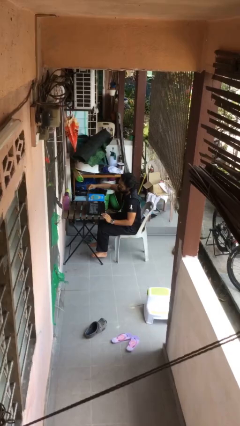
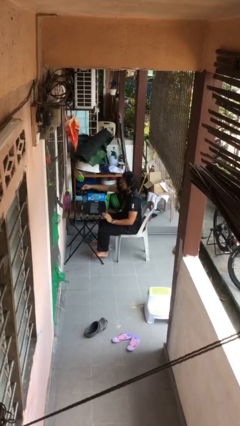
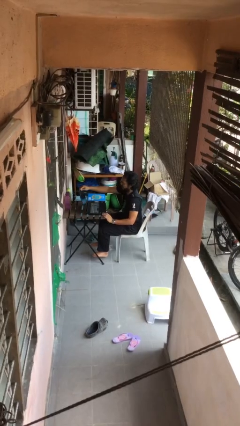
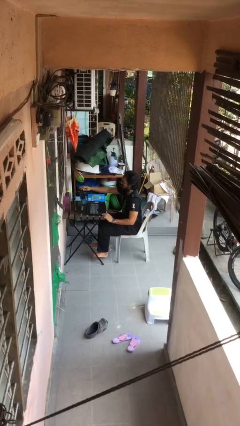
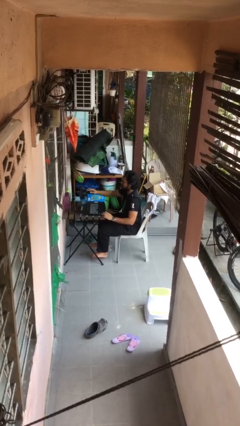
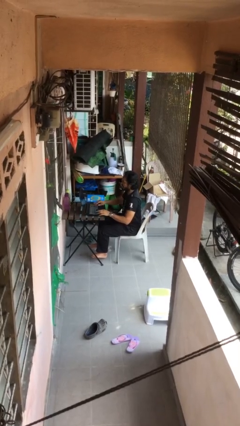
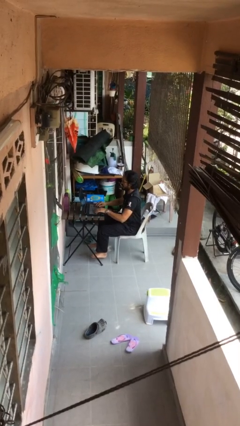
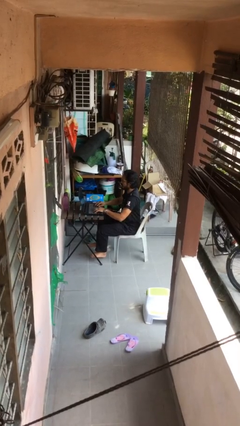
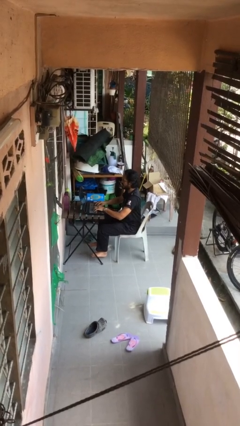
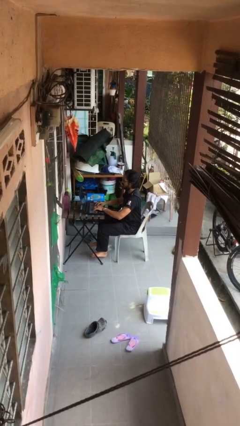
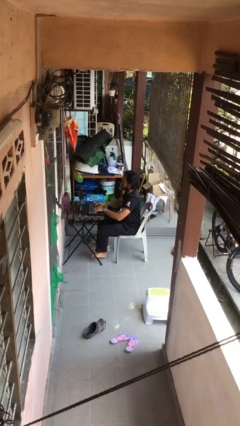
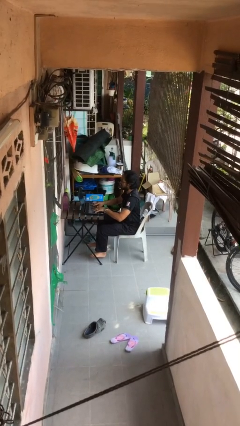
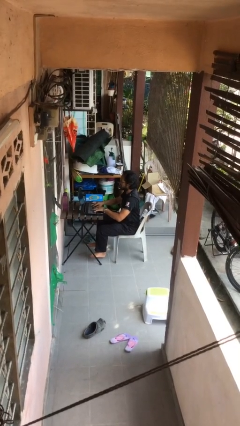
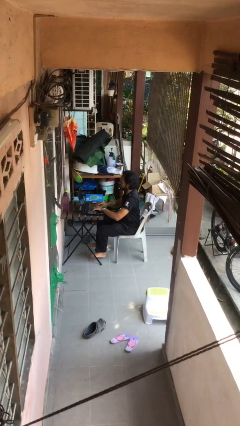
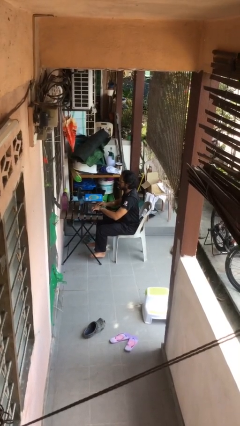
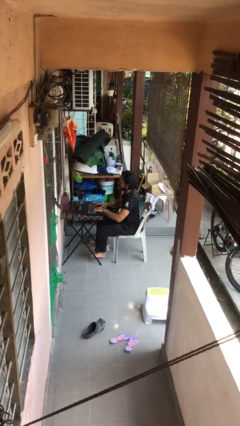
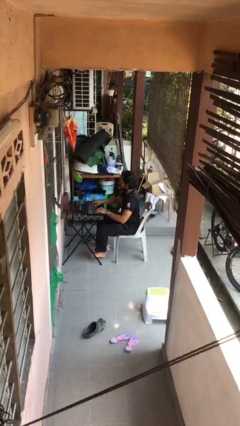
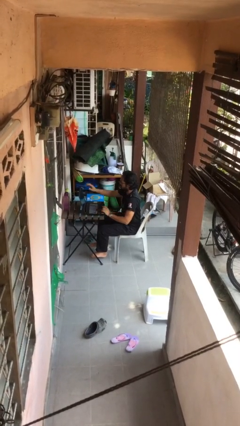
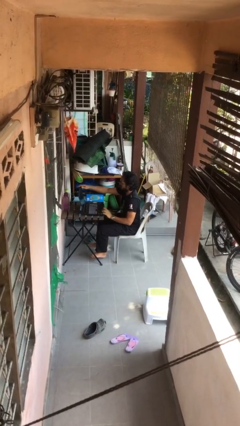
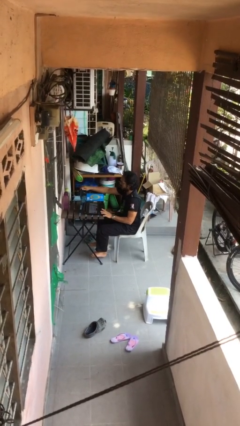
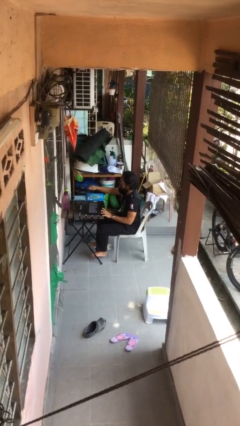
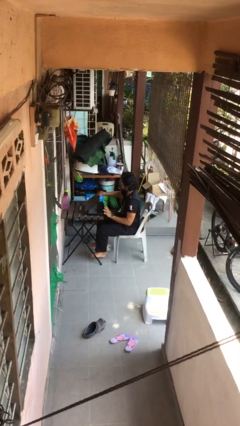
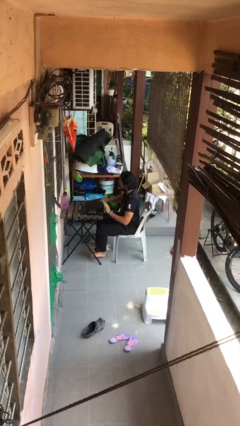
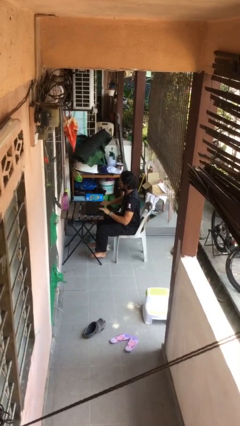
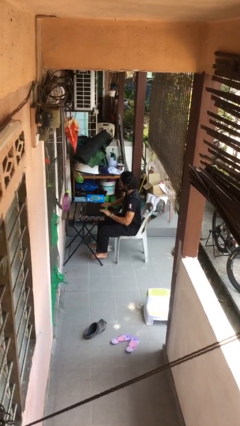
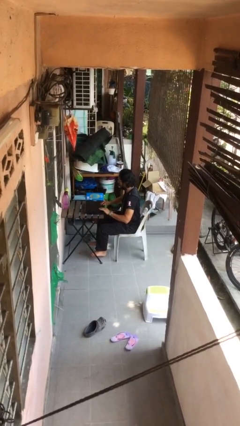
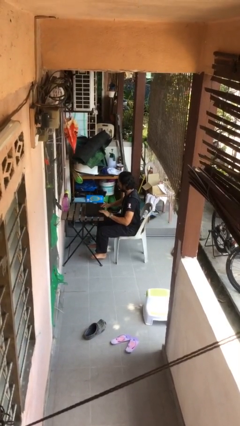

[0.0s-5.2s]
person interacts with laptop

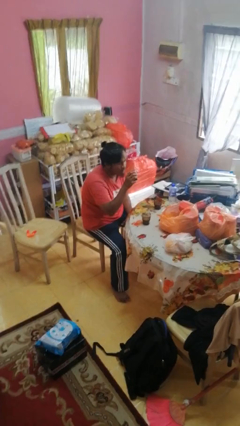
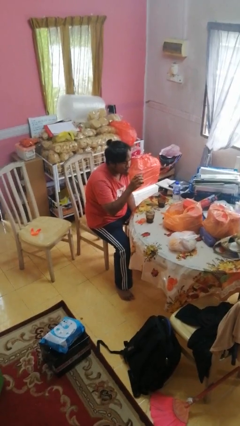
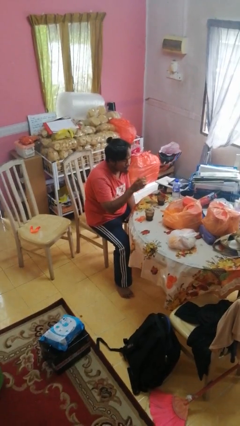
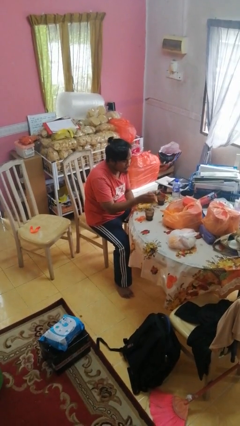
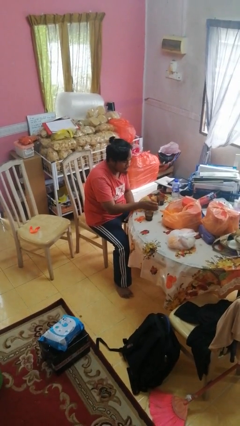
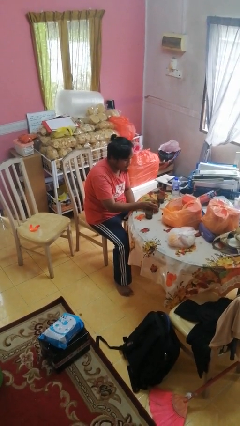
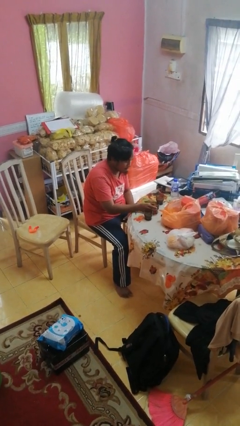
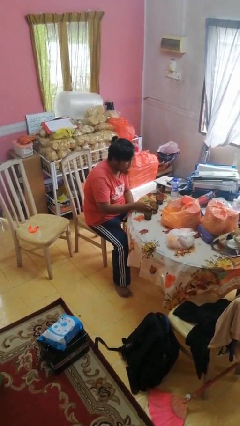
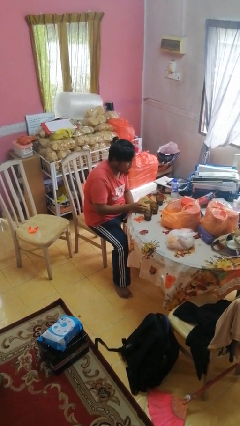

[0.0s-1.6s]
person puts down object on table

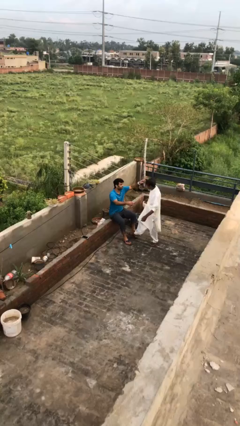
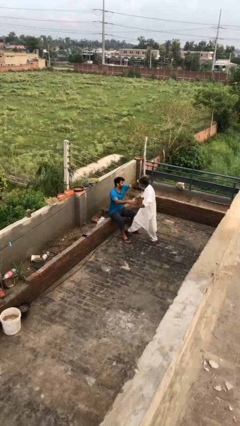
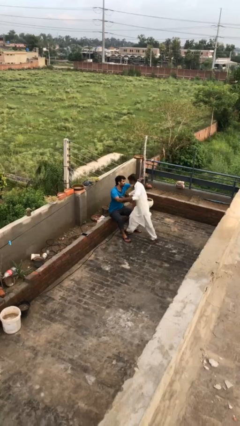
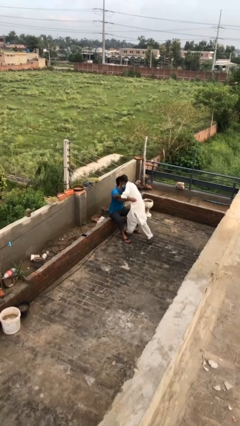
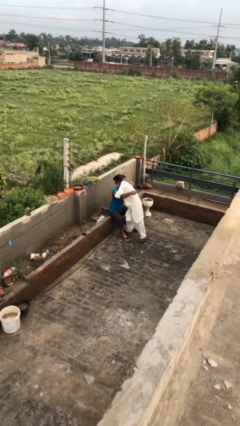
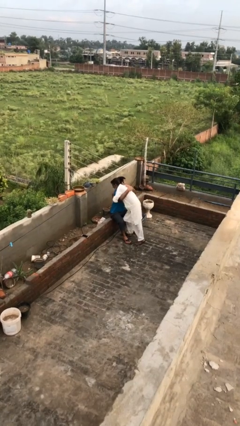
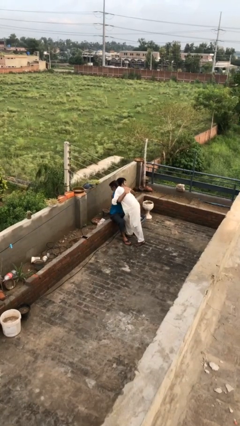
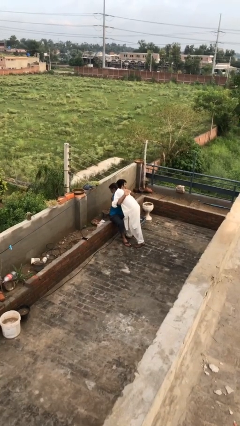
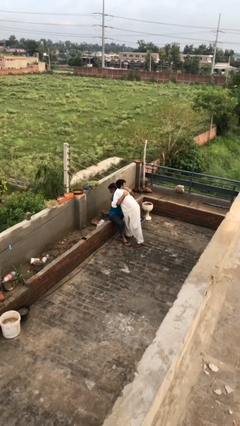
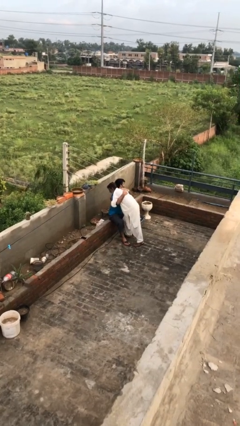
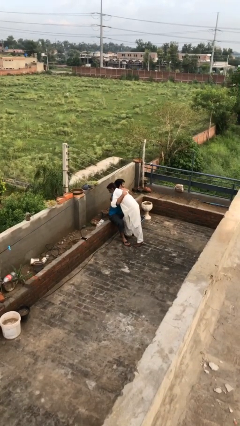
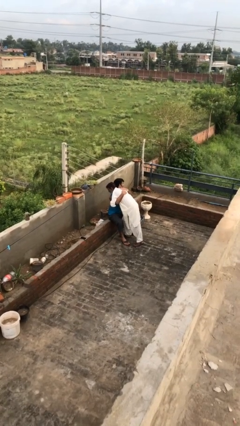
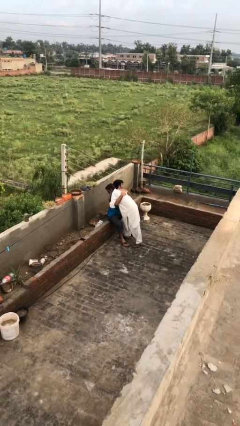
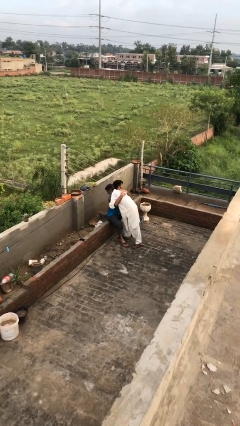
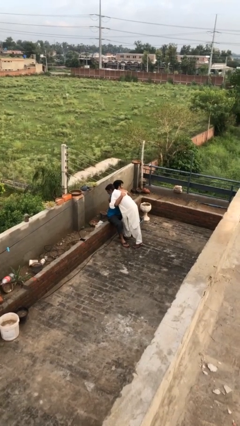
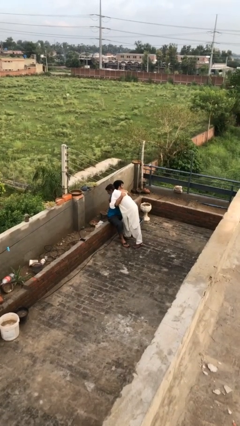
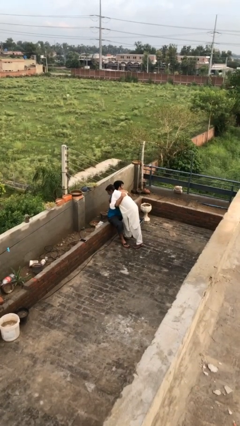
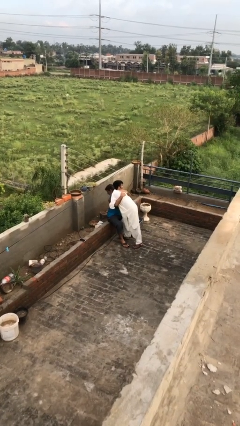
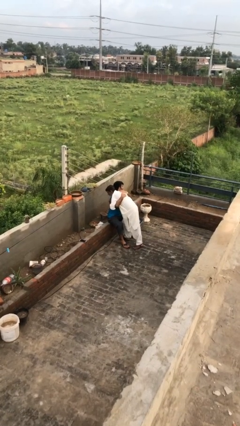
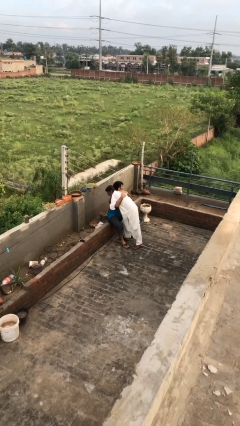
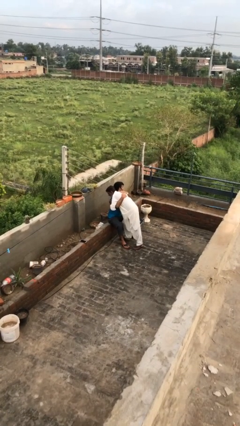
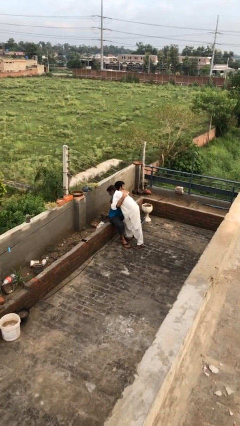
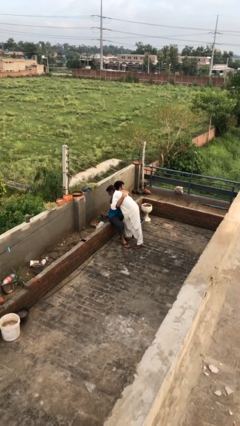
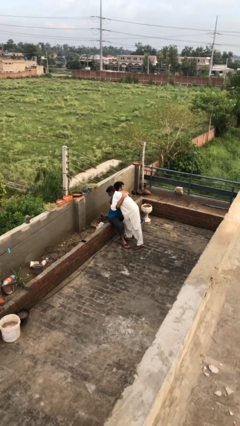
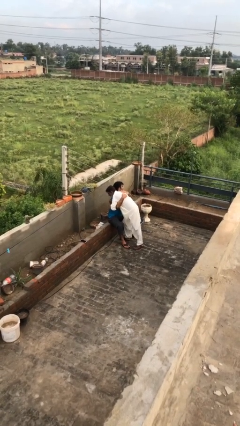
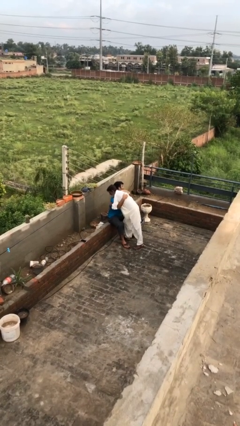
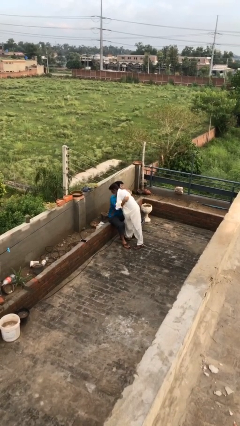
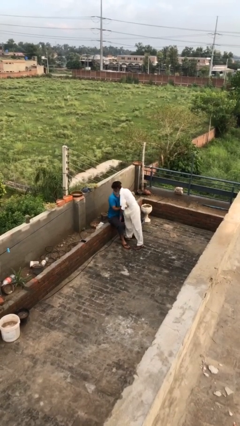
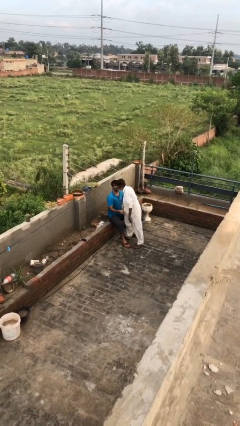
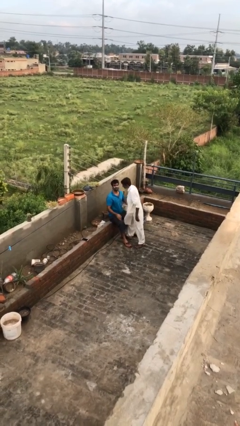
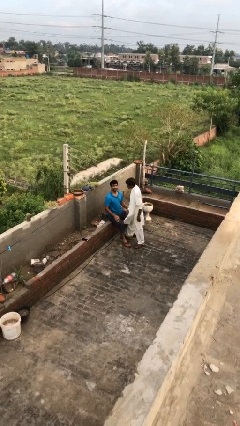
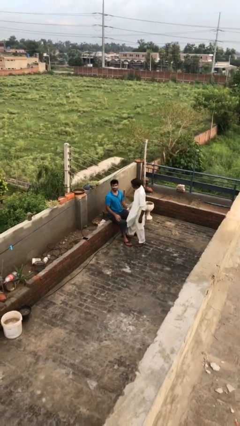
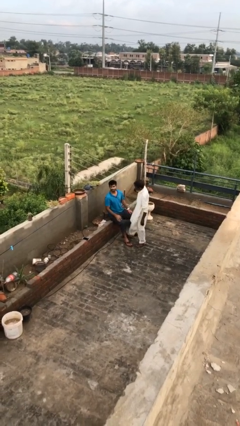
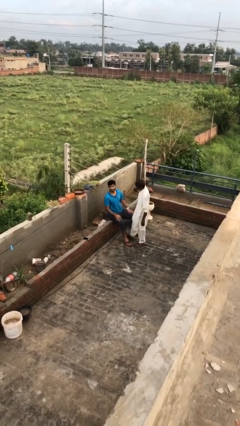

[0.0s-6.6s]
person embraces person

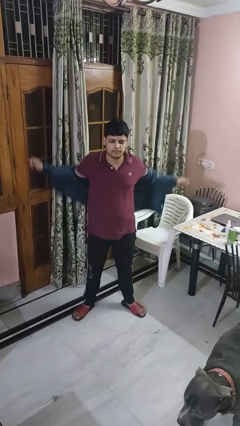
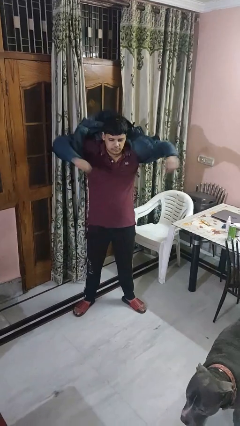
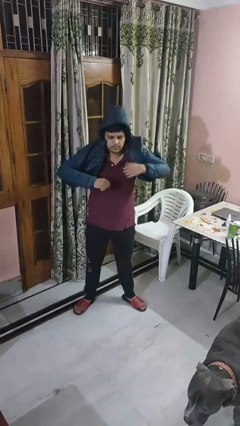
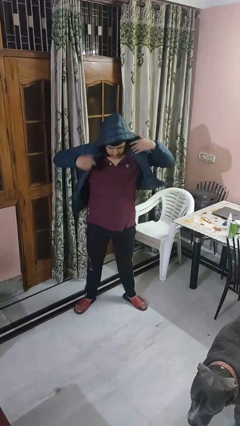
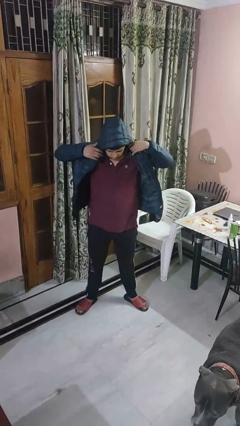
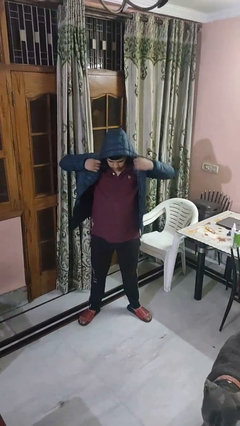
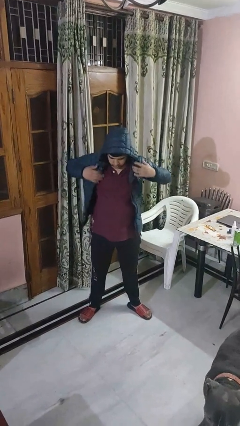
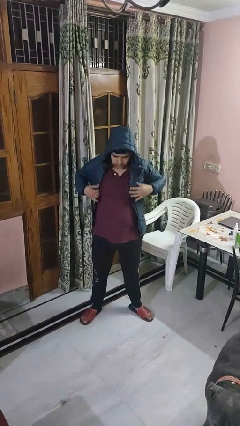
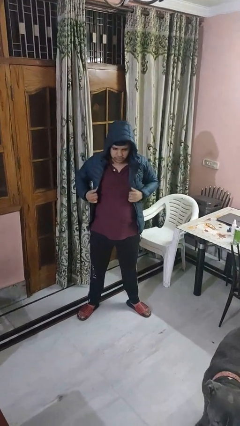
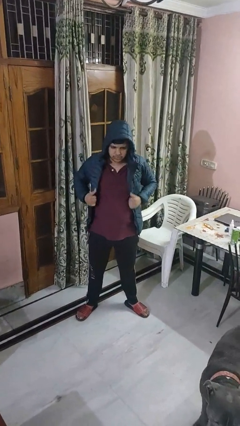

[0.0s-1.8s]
person puts on hoodie

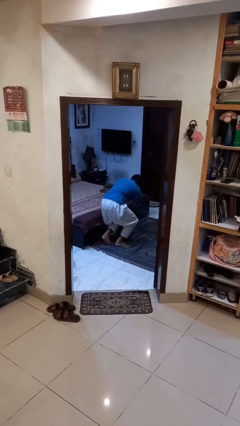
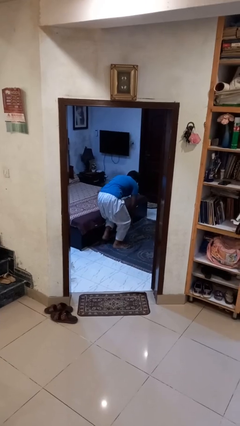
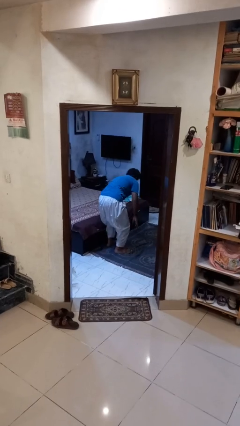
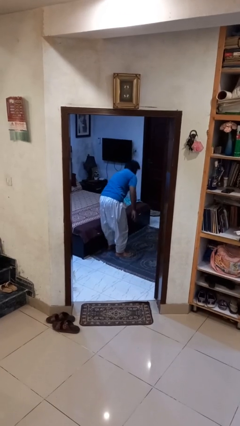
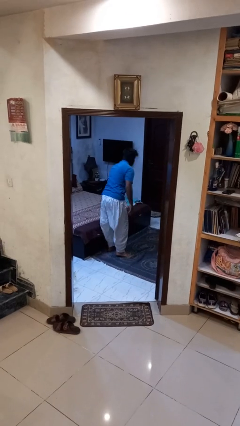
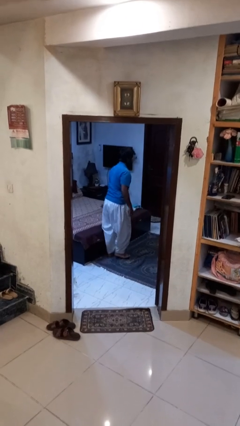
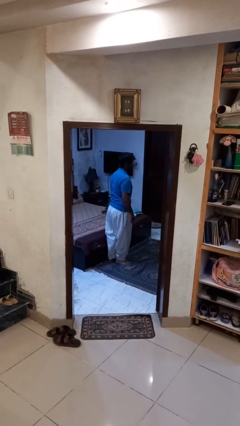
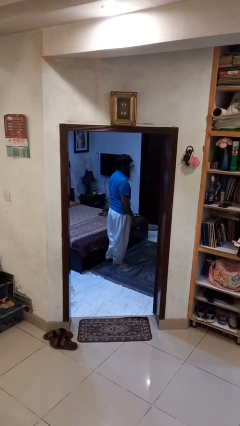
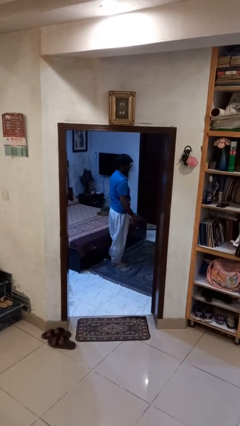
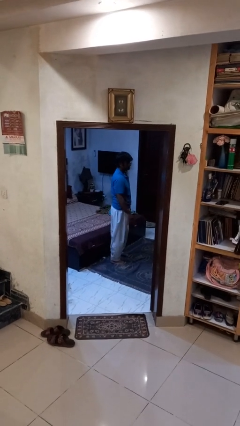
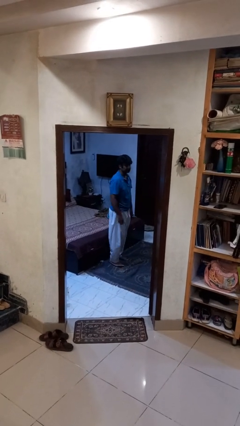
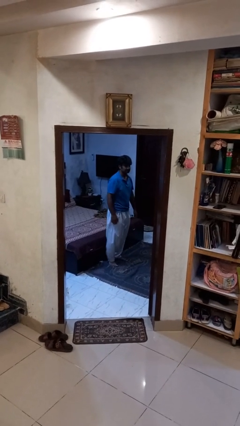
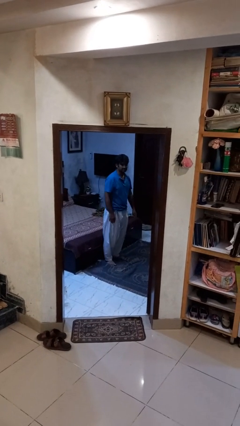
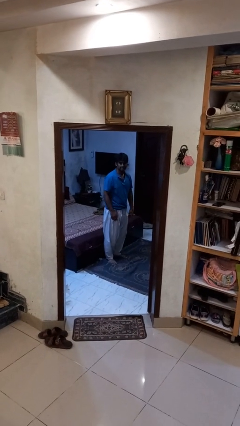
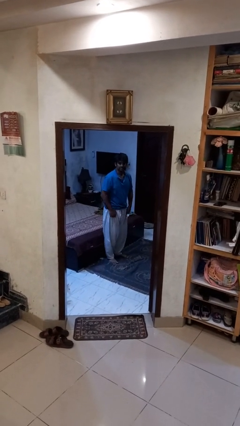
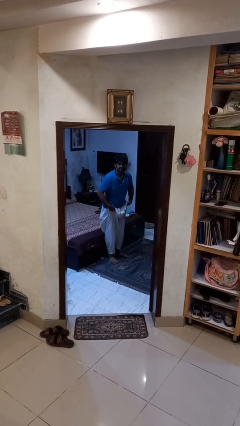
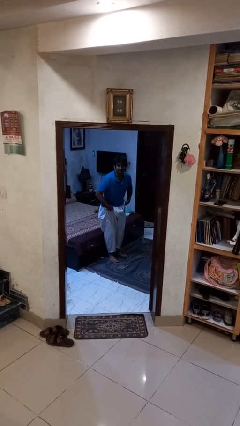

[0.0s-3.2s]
person stands up from floor
